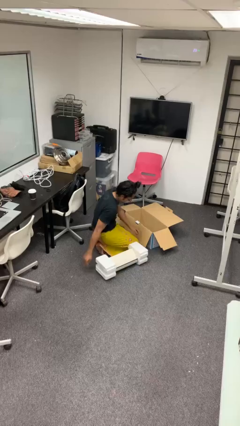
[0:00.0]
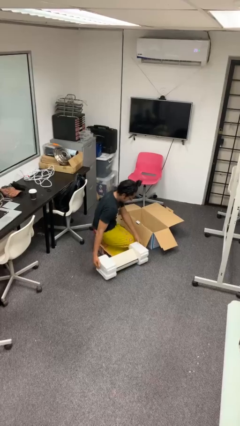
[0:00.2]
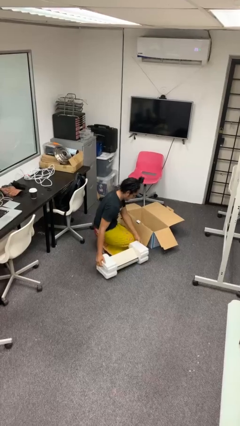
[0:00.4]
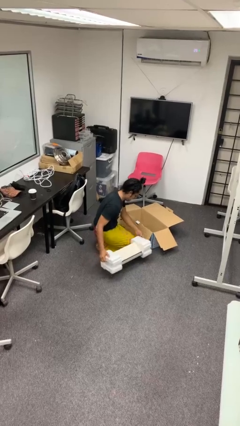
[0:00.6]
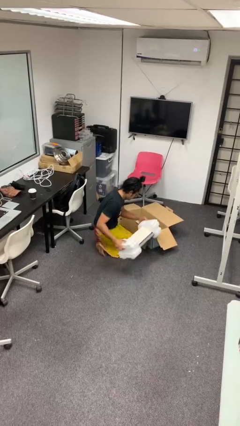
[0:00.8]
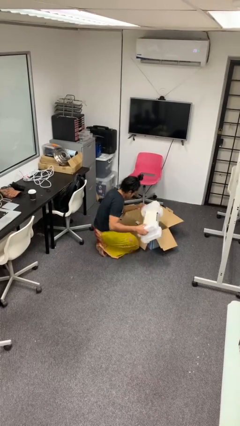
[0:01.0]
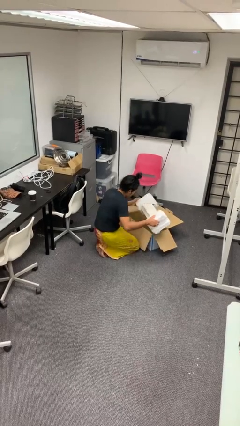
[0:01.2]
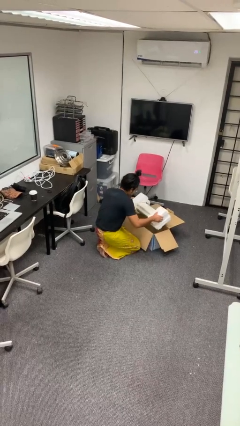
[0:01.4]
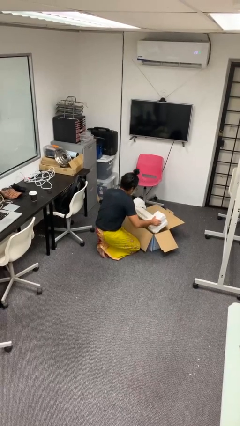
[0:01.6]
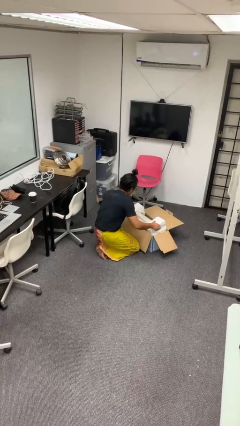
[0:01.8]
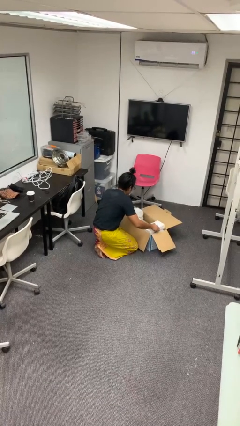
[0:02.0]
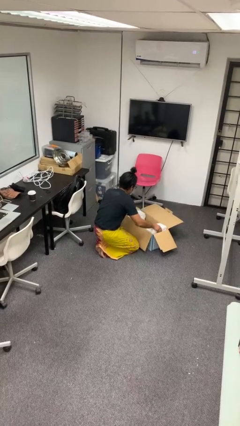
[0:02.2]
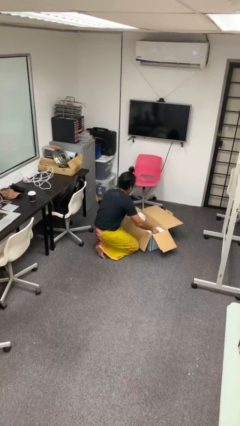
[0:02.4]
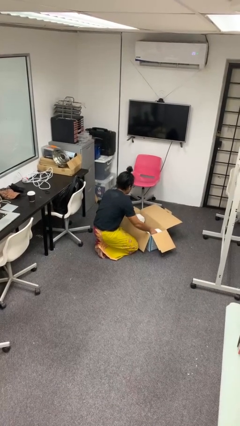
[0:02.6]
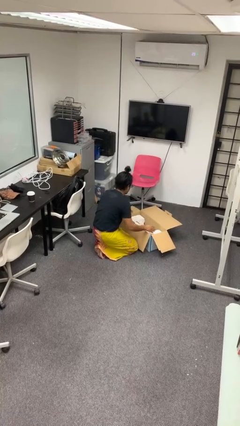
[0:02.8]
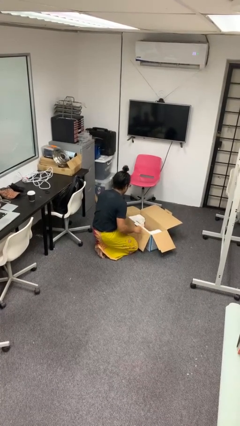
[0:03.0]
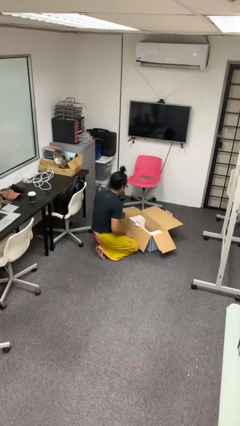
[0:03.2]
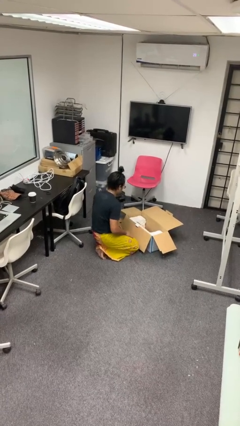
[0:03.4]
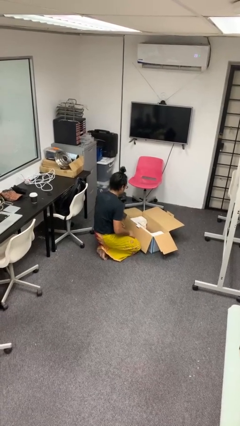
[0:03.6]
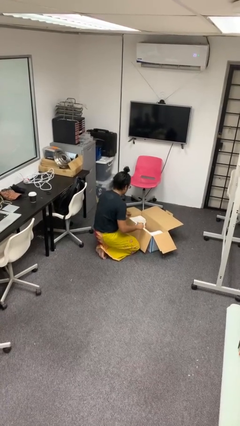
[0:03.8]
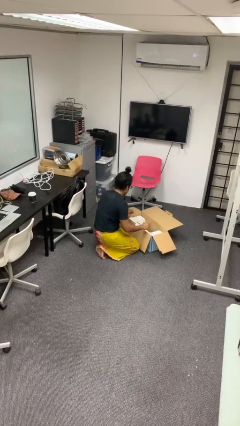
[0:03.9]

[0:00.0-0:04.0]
person puts object into box

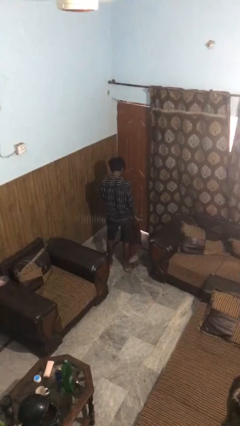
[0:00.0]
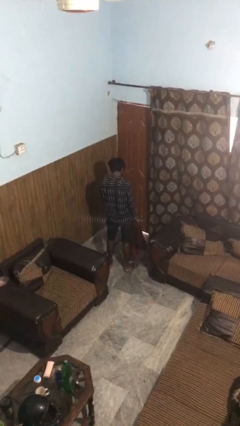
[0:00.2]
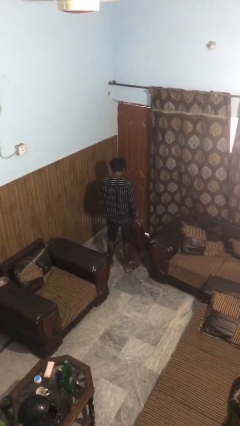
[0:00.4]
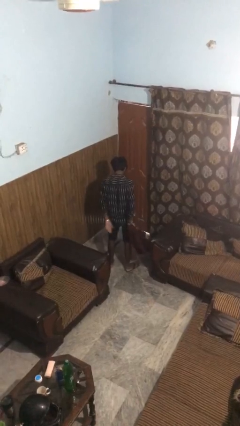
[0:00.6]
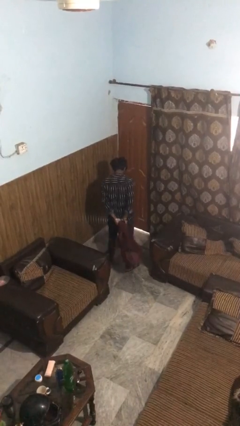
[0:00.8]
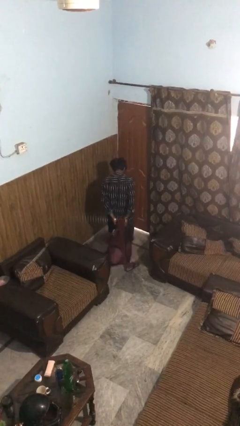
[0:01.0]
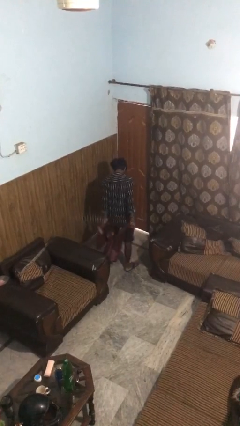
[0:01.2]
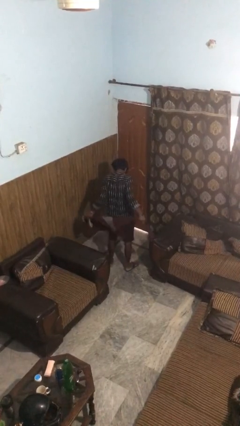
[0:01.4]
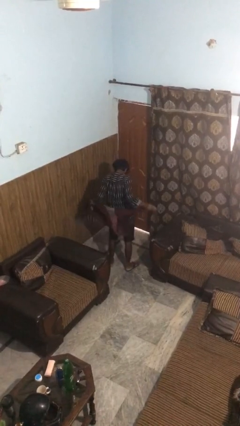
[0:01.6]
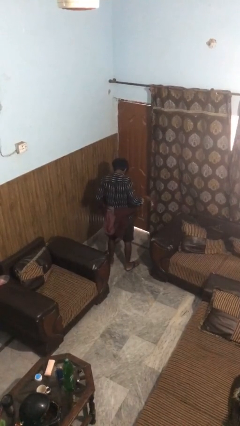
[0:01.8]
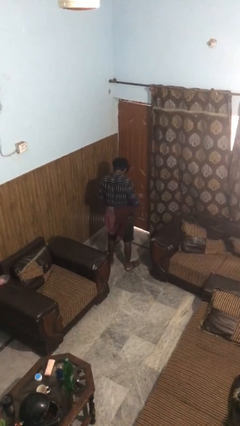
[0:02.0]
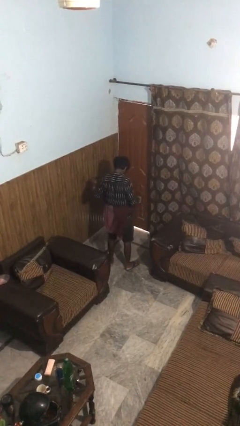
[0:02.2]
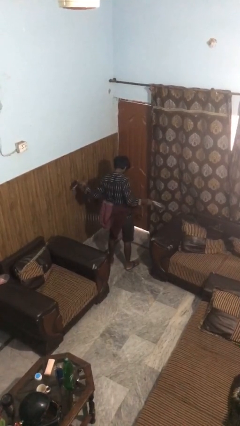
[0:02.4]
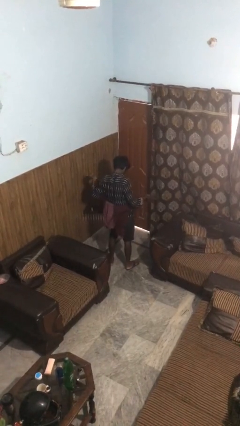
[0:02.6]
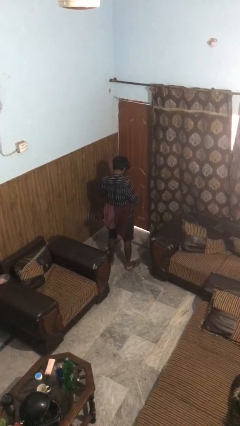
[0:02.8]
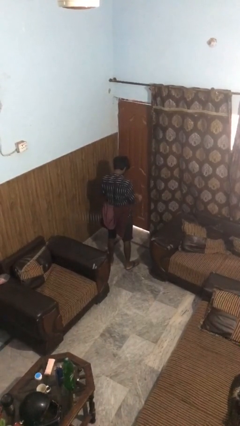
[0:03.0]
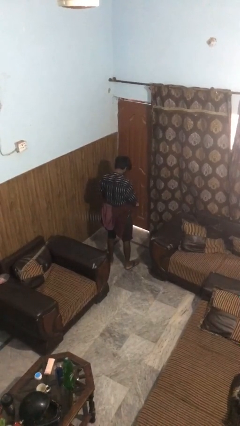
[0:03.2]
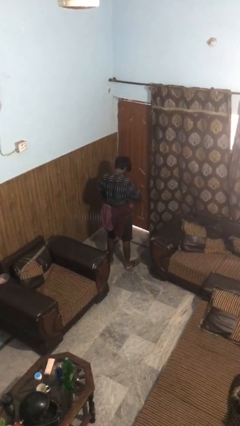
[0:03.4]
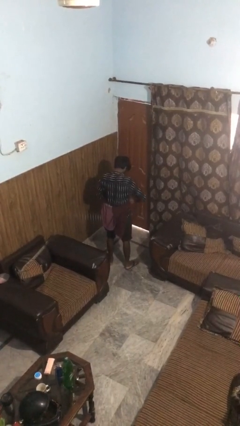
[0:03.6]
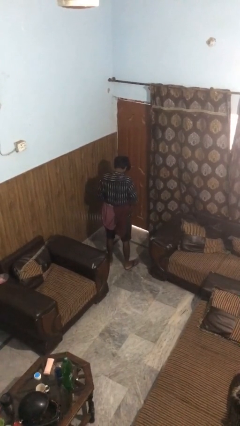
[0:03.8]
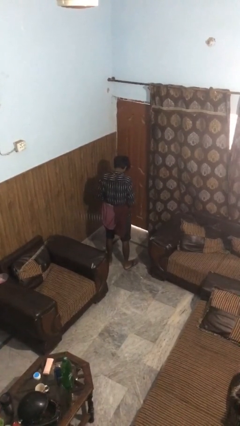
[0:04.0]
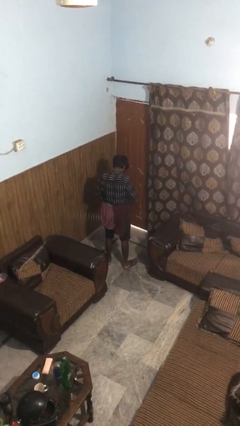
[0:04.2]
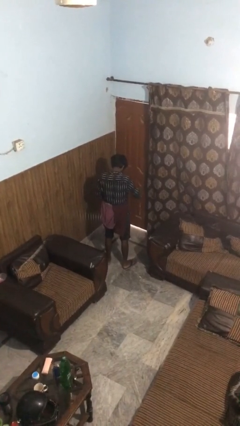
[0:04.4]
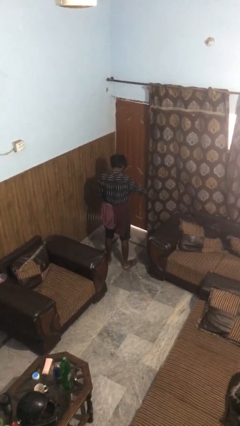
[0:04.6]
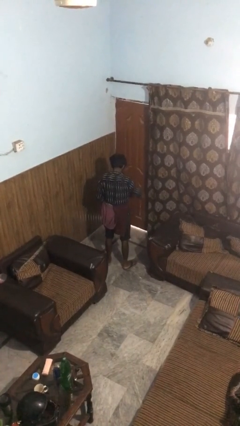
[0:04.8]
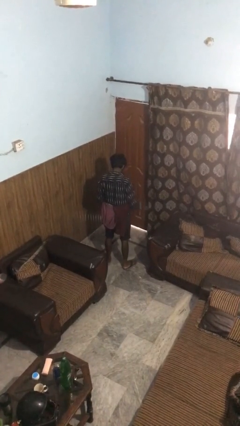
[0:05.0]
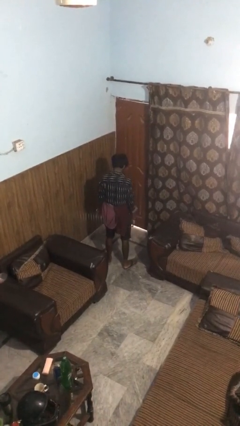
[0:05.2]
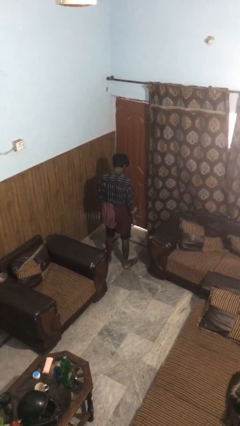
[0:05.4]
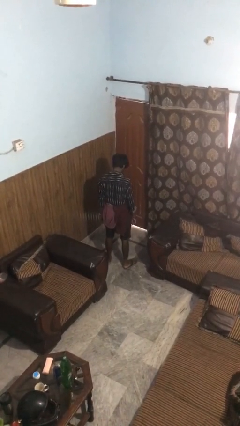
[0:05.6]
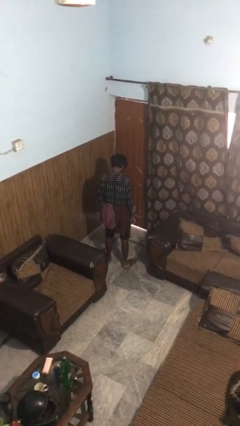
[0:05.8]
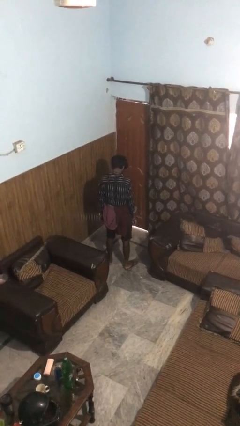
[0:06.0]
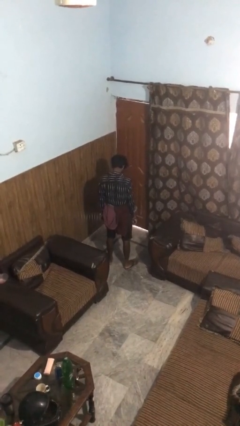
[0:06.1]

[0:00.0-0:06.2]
person ties jacket around waist

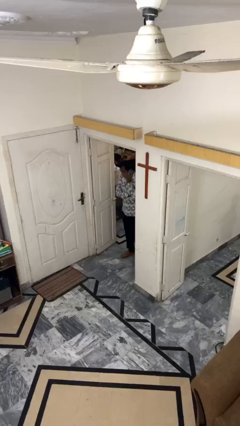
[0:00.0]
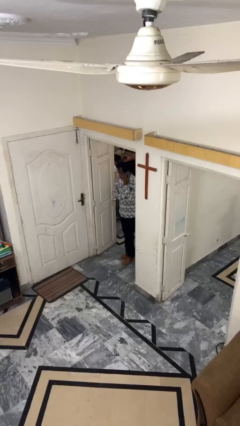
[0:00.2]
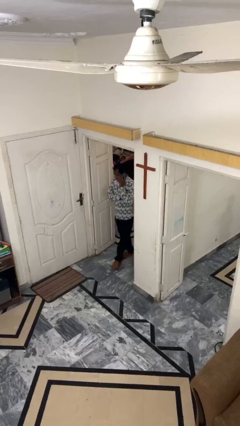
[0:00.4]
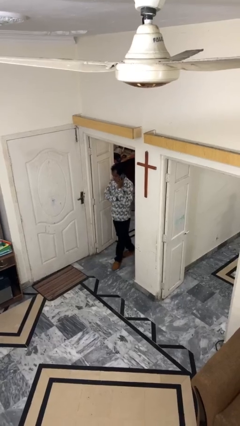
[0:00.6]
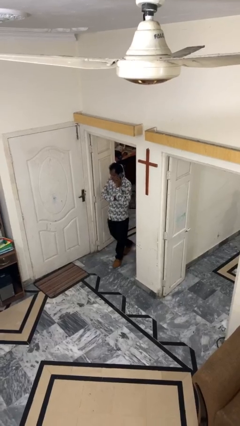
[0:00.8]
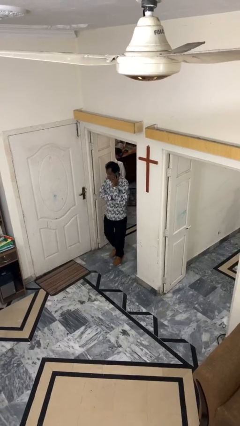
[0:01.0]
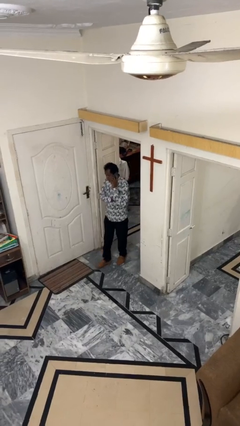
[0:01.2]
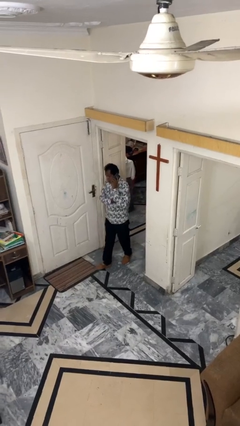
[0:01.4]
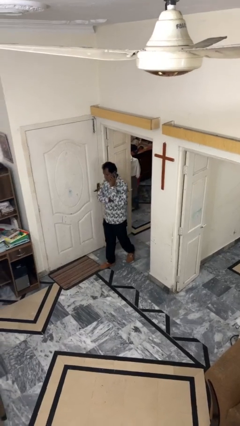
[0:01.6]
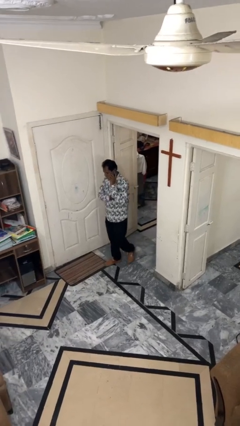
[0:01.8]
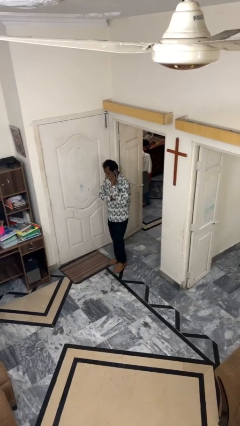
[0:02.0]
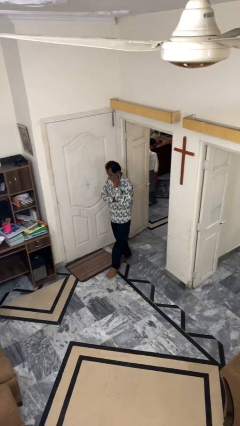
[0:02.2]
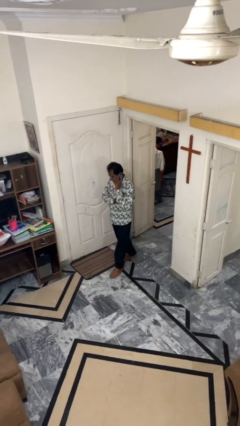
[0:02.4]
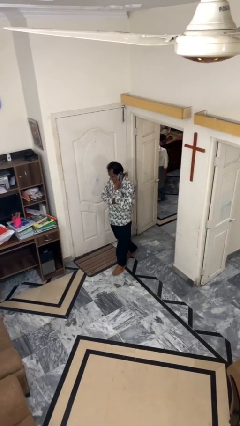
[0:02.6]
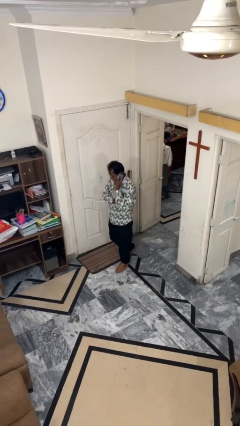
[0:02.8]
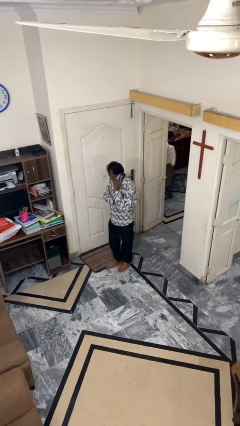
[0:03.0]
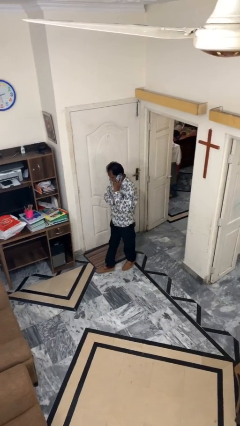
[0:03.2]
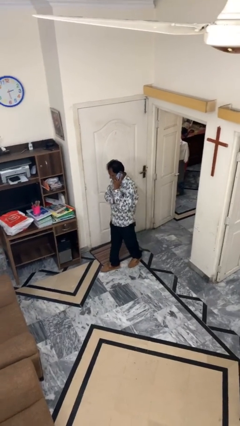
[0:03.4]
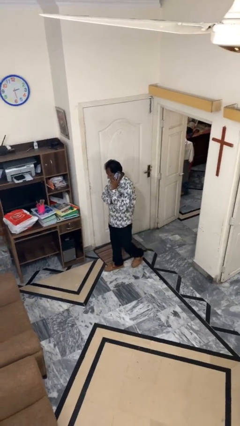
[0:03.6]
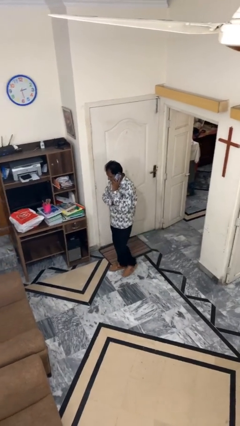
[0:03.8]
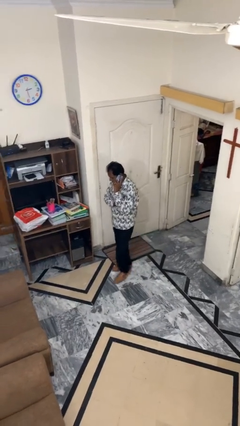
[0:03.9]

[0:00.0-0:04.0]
person enters scene through structure

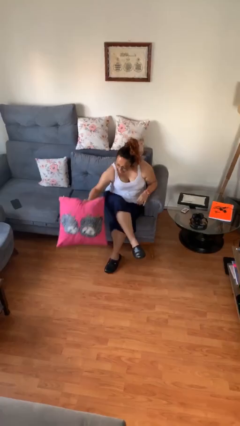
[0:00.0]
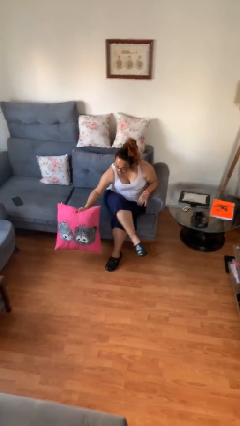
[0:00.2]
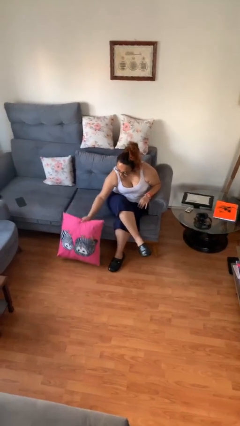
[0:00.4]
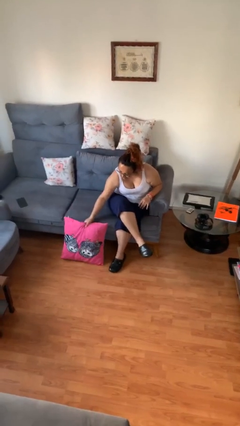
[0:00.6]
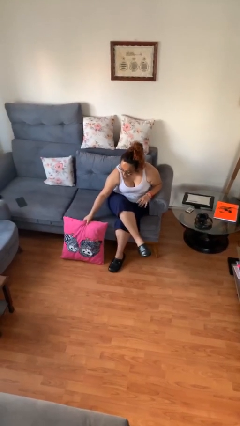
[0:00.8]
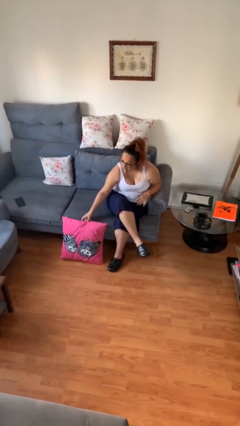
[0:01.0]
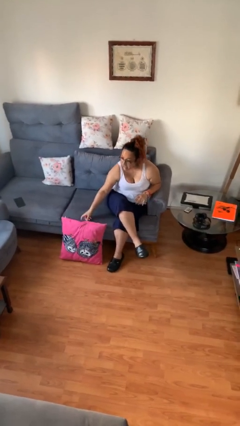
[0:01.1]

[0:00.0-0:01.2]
person puts down object on floor

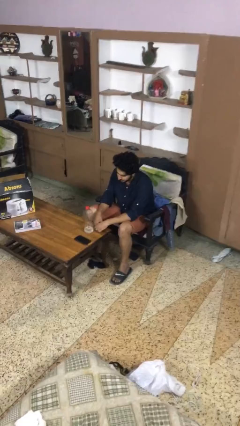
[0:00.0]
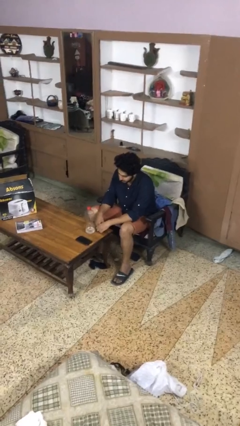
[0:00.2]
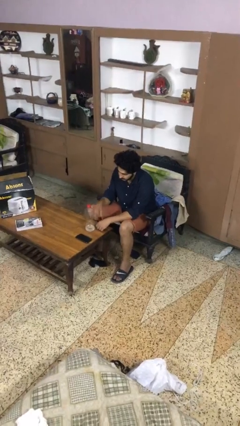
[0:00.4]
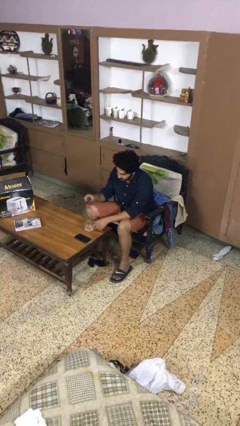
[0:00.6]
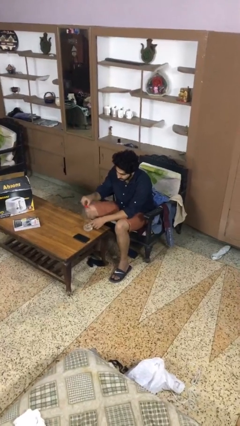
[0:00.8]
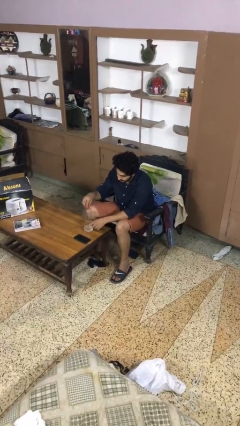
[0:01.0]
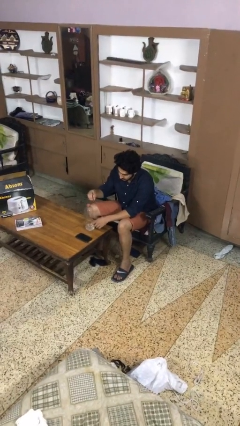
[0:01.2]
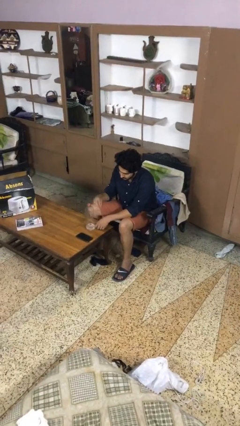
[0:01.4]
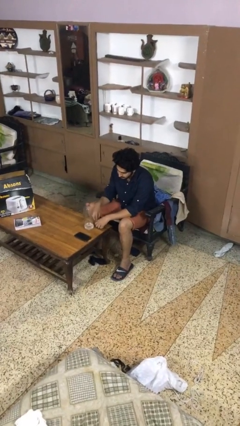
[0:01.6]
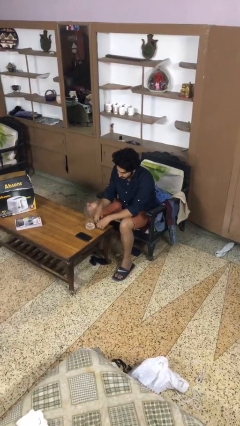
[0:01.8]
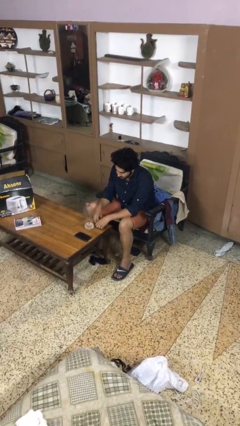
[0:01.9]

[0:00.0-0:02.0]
person unscrews lid from bottle

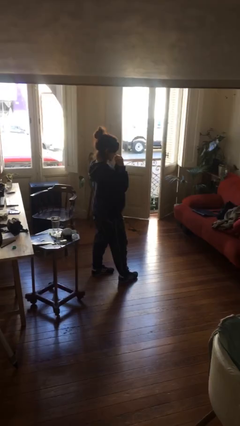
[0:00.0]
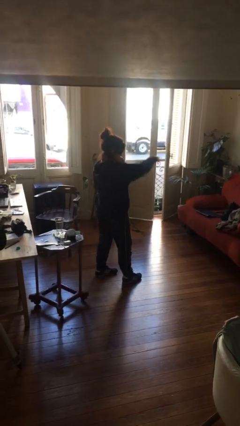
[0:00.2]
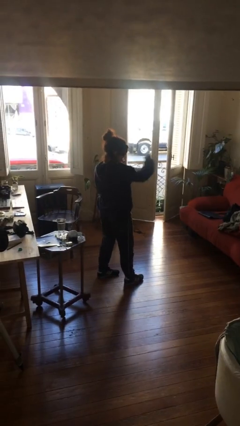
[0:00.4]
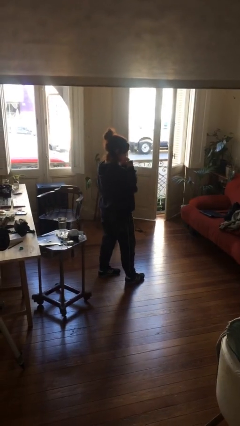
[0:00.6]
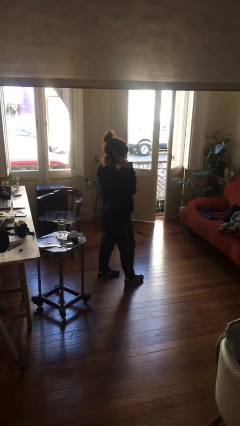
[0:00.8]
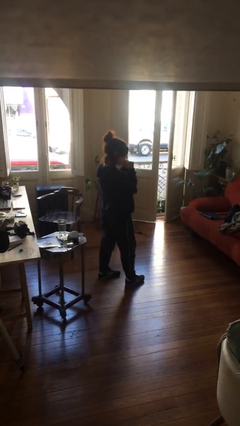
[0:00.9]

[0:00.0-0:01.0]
person punches
